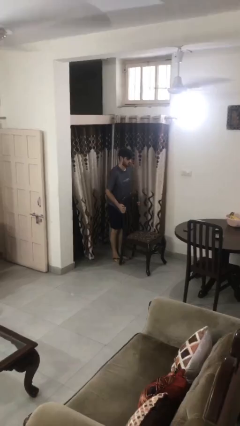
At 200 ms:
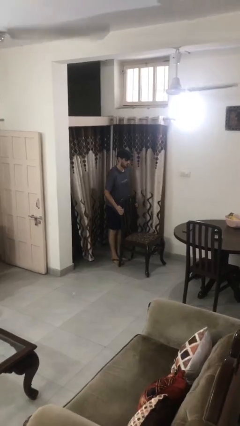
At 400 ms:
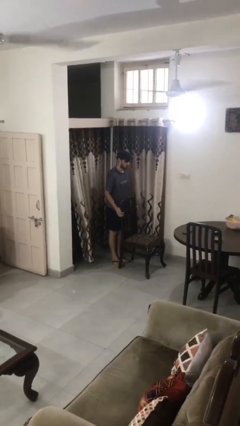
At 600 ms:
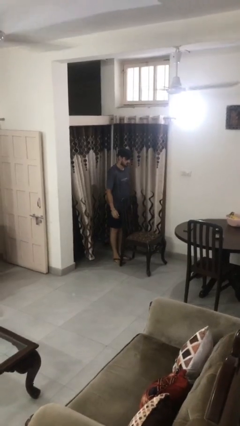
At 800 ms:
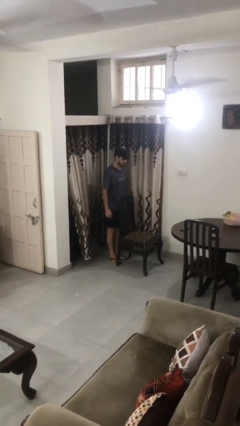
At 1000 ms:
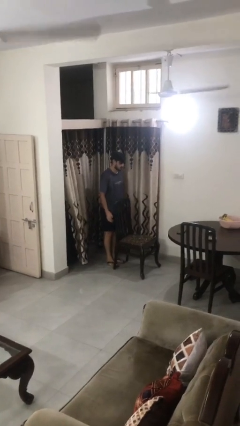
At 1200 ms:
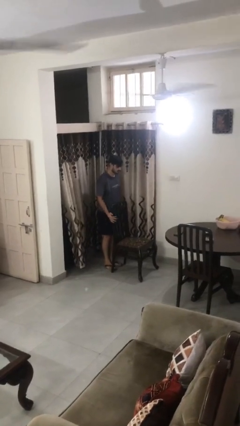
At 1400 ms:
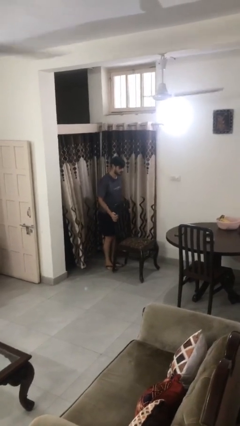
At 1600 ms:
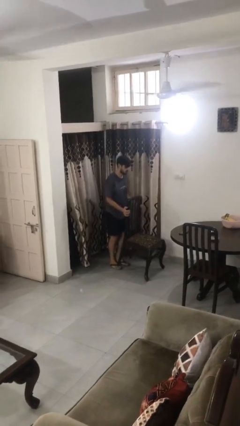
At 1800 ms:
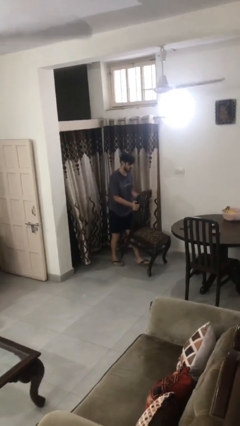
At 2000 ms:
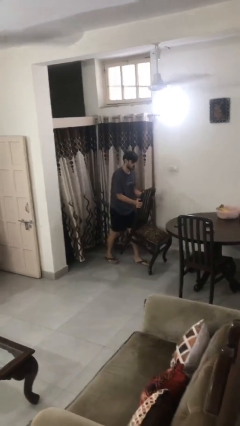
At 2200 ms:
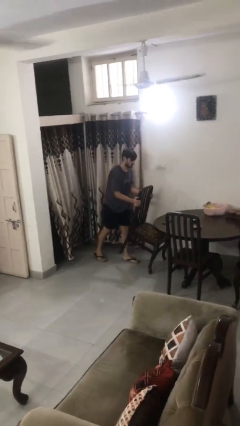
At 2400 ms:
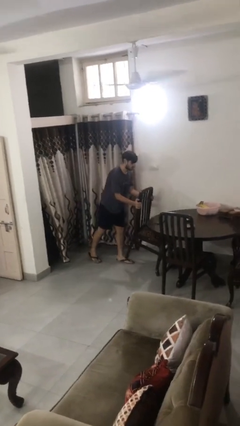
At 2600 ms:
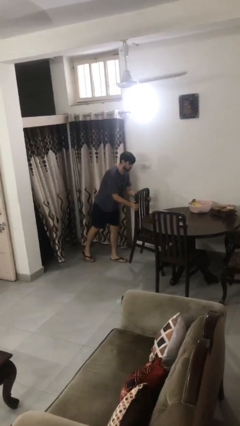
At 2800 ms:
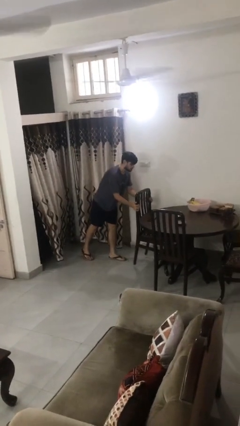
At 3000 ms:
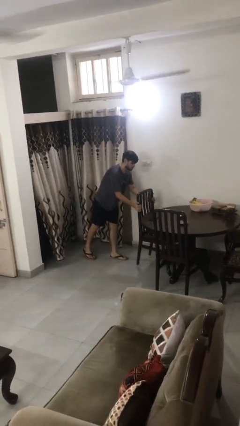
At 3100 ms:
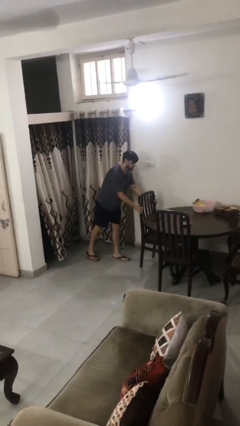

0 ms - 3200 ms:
person pushes in chair

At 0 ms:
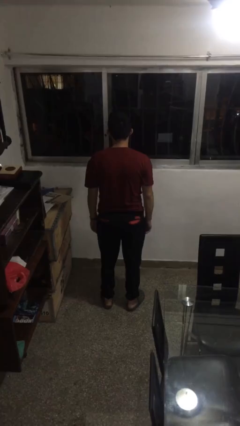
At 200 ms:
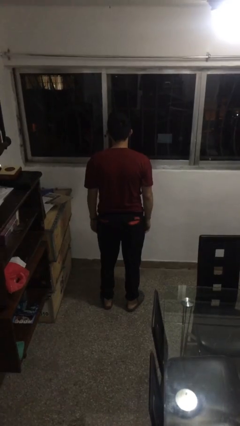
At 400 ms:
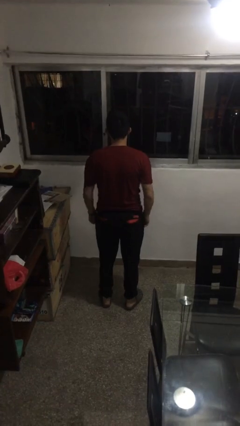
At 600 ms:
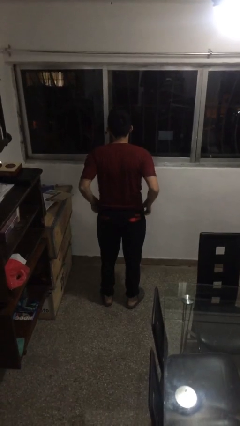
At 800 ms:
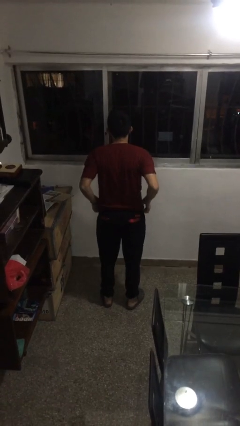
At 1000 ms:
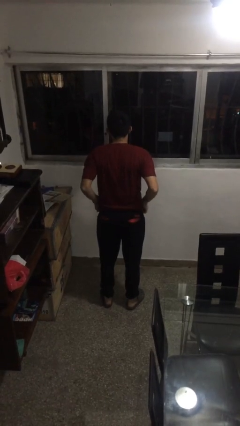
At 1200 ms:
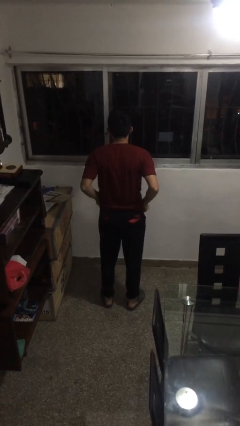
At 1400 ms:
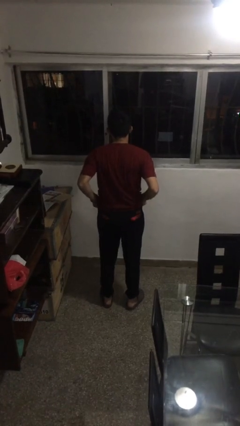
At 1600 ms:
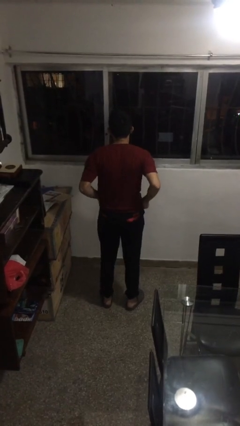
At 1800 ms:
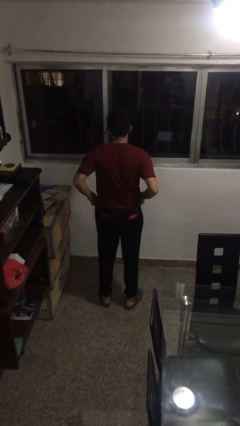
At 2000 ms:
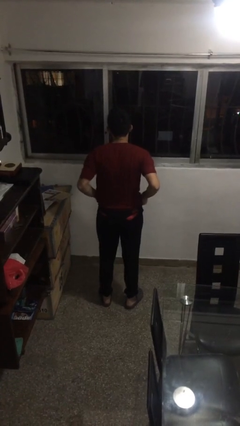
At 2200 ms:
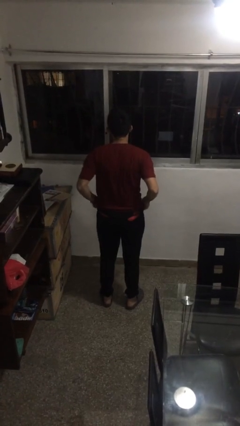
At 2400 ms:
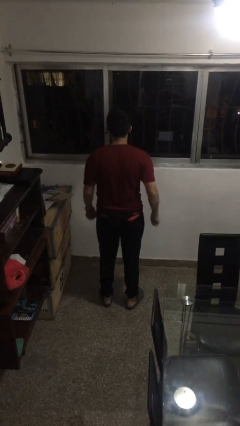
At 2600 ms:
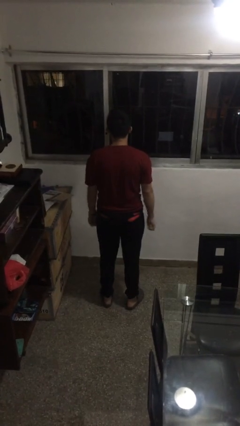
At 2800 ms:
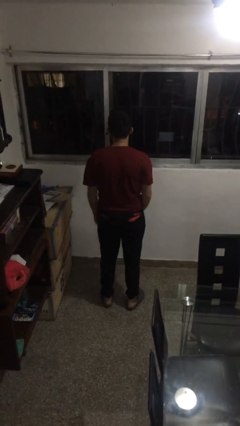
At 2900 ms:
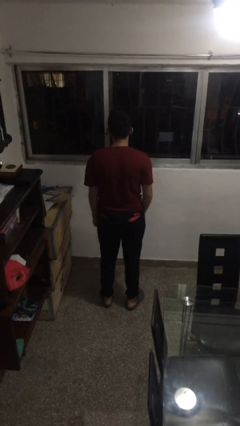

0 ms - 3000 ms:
person hikes up pants

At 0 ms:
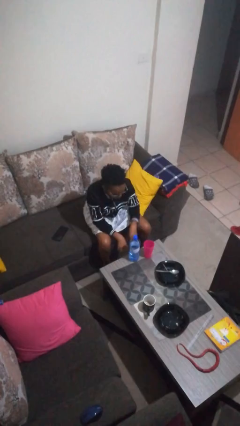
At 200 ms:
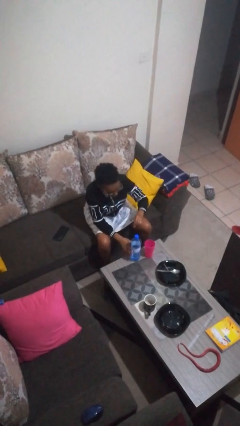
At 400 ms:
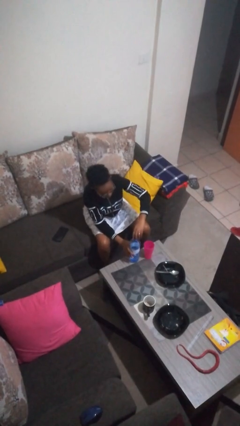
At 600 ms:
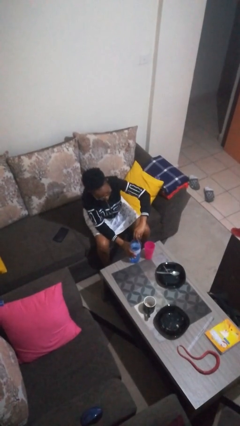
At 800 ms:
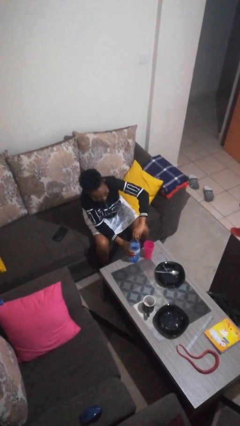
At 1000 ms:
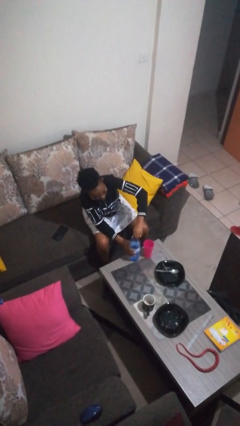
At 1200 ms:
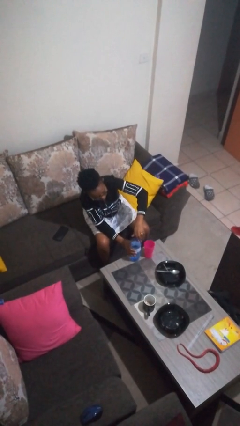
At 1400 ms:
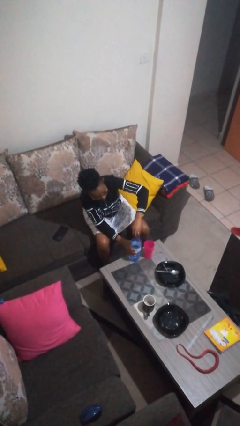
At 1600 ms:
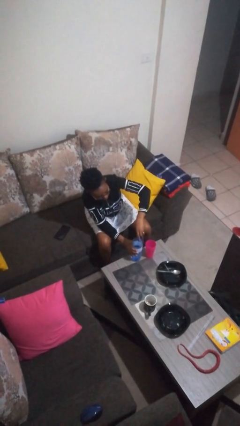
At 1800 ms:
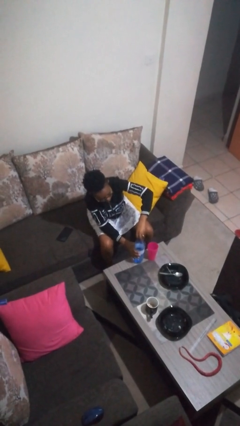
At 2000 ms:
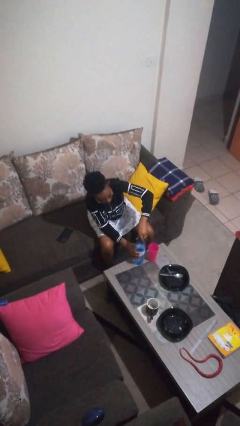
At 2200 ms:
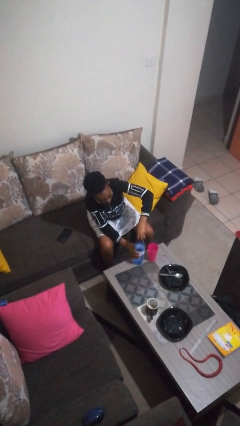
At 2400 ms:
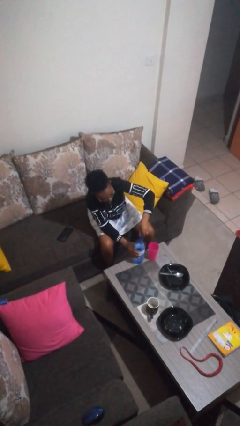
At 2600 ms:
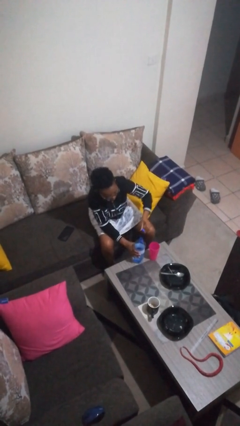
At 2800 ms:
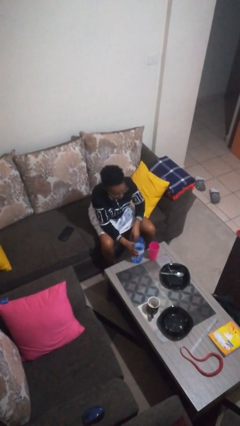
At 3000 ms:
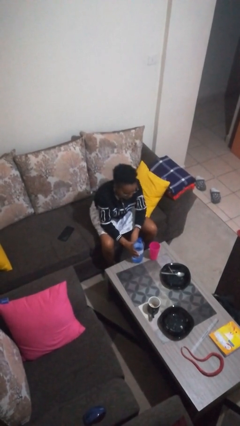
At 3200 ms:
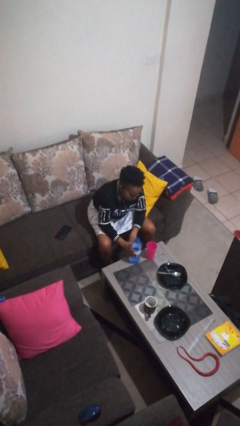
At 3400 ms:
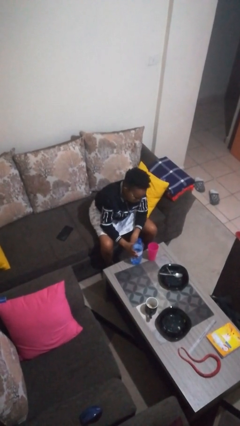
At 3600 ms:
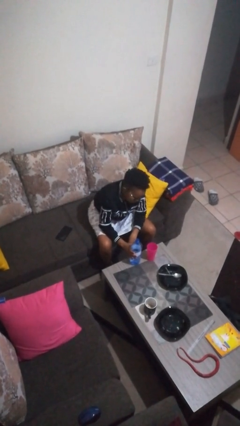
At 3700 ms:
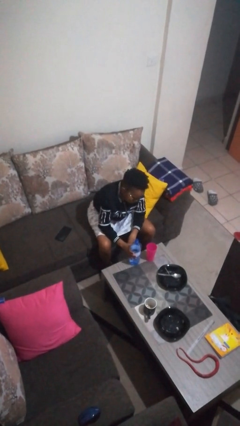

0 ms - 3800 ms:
person unscrews lid from bottle

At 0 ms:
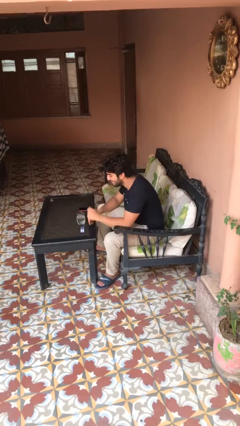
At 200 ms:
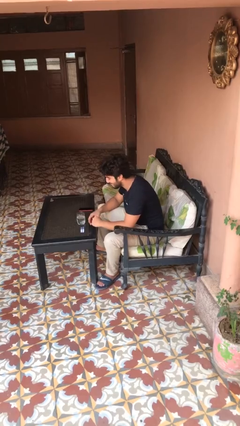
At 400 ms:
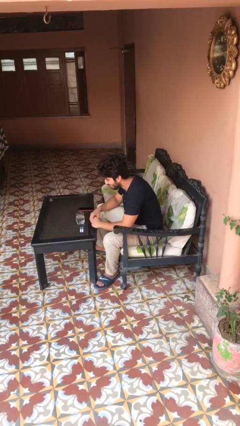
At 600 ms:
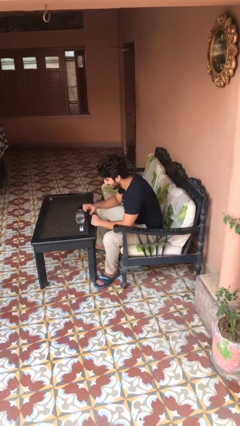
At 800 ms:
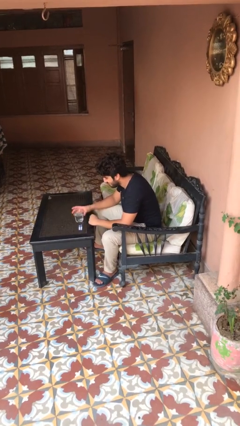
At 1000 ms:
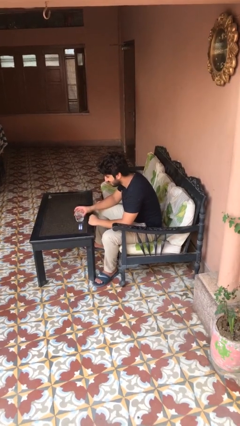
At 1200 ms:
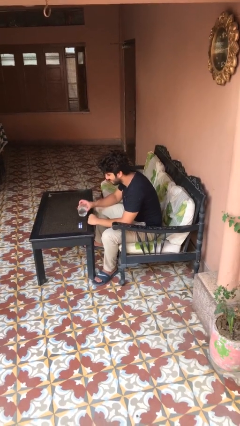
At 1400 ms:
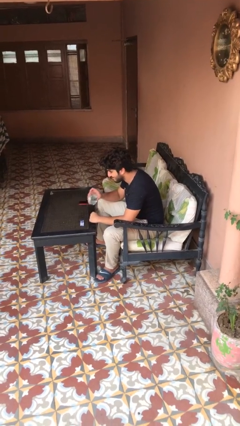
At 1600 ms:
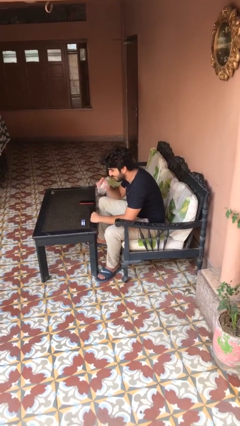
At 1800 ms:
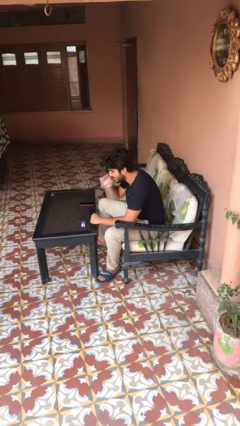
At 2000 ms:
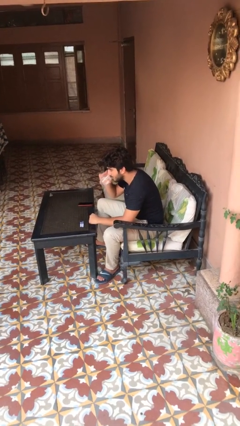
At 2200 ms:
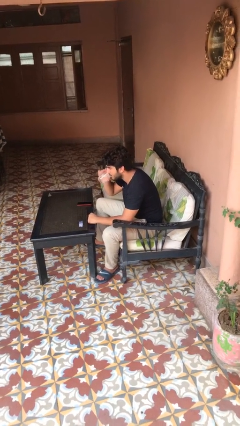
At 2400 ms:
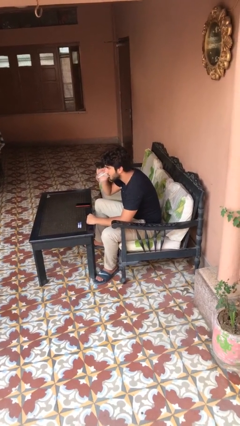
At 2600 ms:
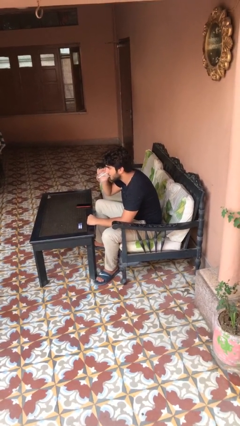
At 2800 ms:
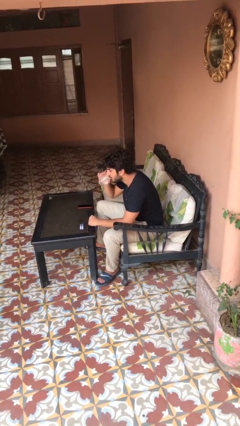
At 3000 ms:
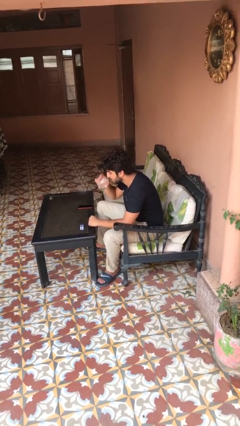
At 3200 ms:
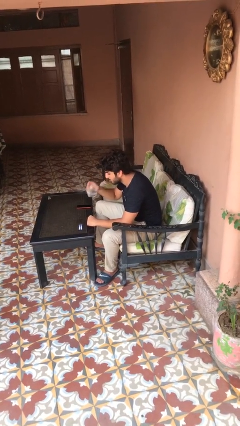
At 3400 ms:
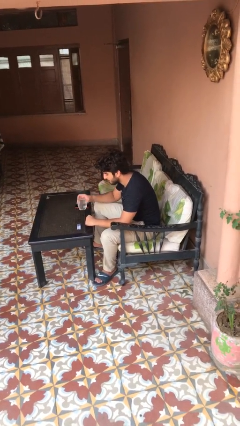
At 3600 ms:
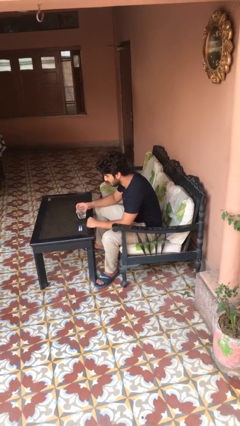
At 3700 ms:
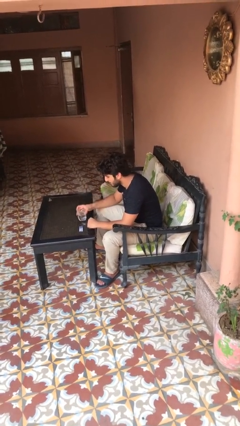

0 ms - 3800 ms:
person drinks from cup

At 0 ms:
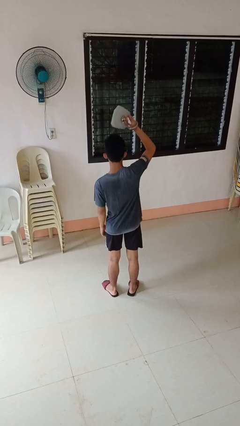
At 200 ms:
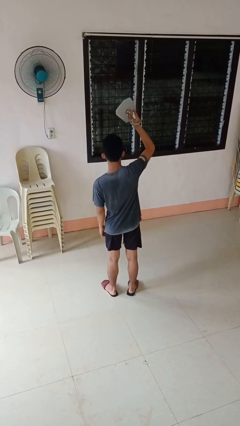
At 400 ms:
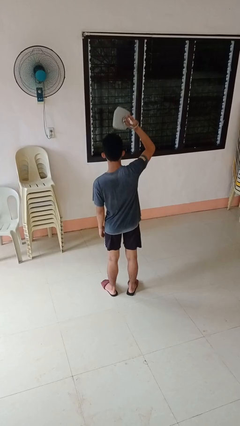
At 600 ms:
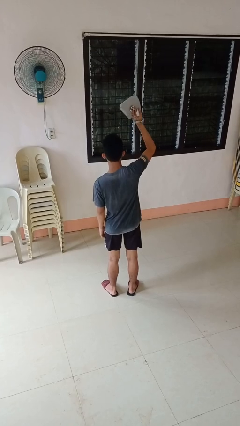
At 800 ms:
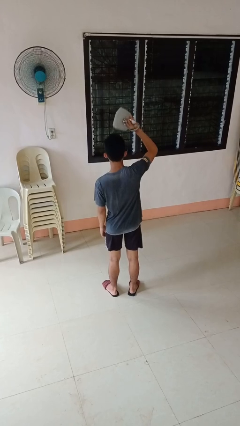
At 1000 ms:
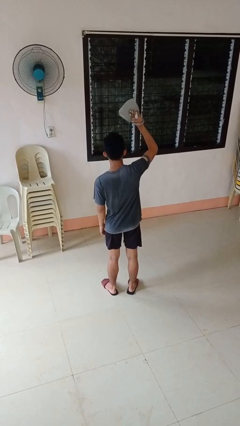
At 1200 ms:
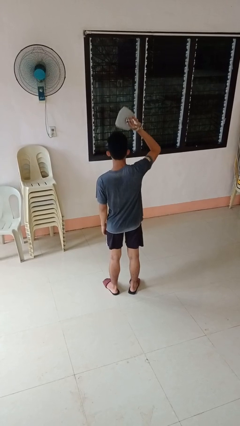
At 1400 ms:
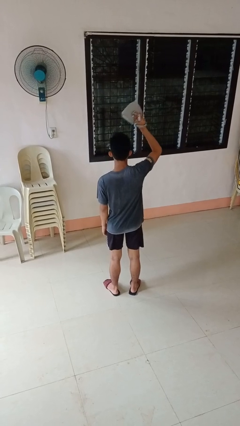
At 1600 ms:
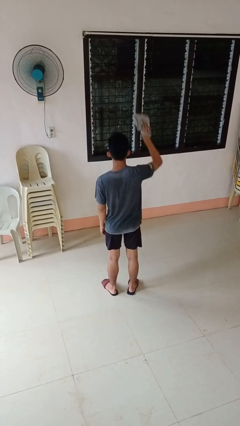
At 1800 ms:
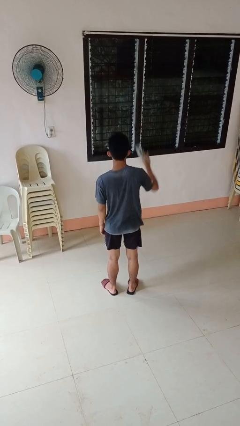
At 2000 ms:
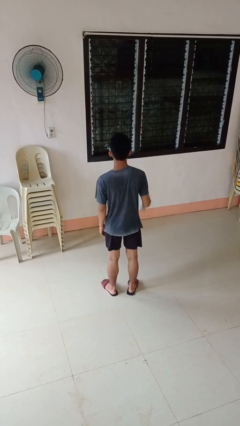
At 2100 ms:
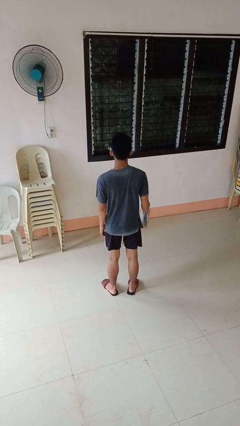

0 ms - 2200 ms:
person holds object above head

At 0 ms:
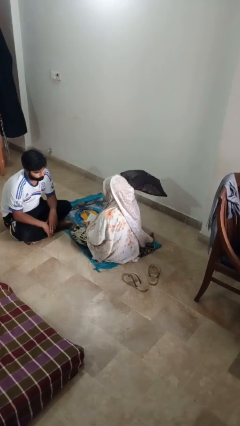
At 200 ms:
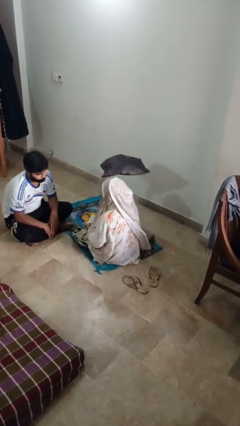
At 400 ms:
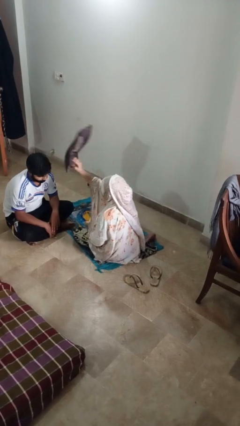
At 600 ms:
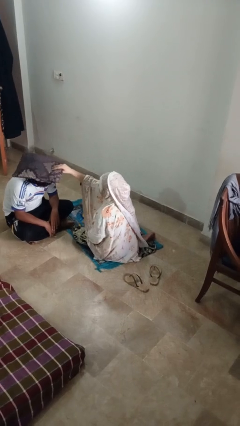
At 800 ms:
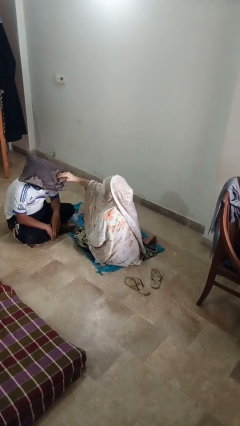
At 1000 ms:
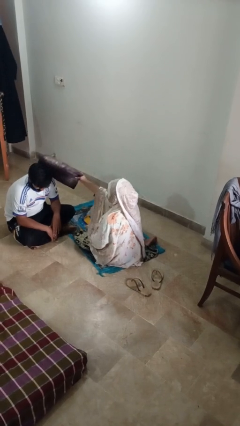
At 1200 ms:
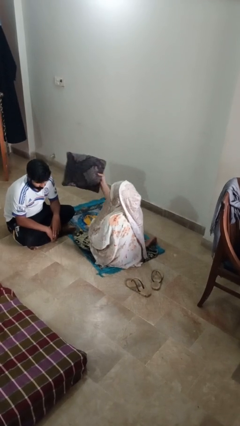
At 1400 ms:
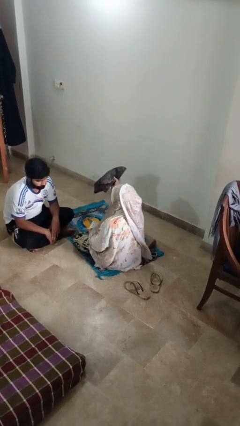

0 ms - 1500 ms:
person hits person with pillow
